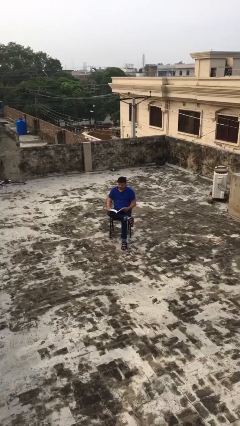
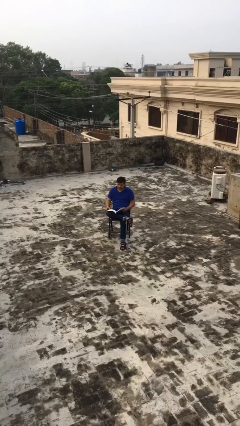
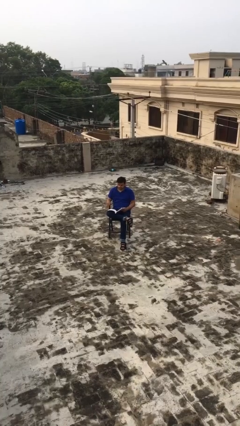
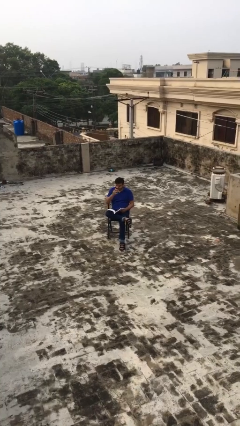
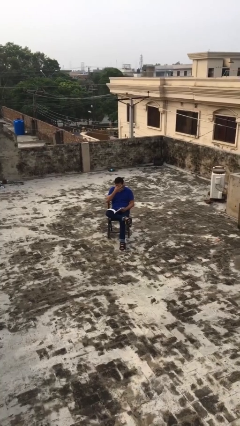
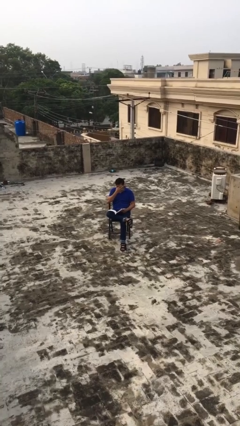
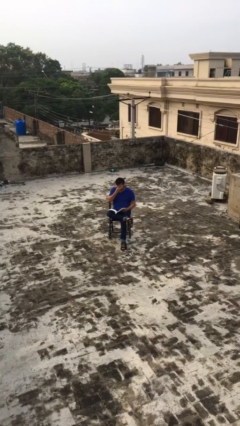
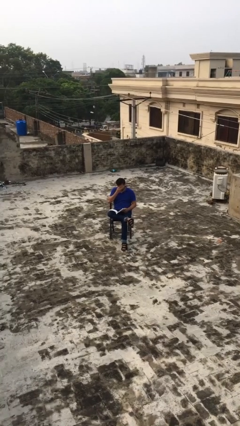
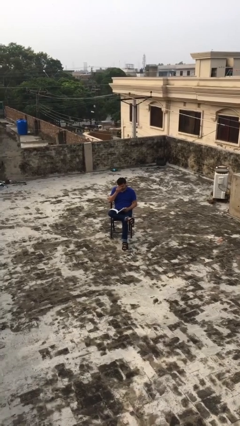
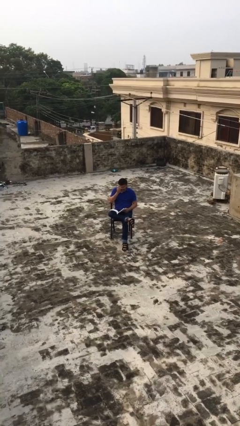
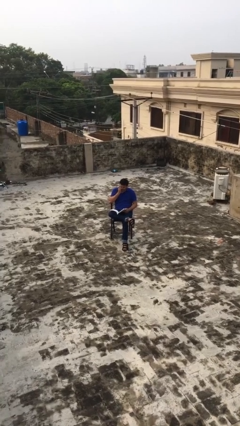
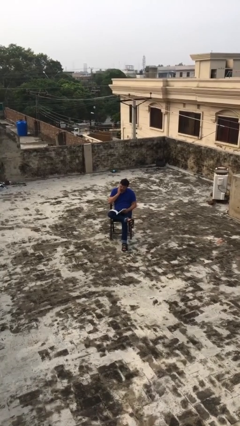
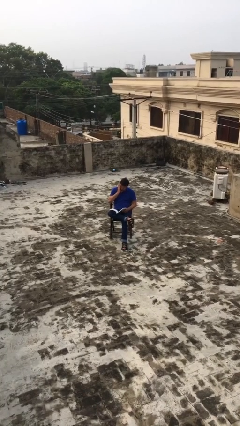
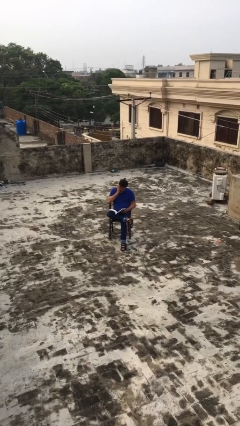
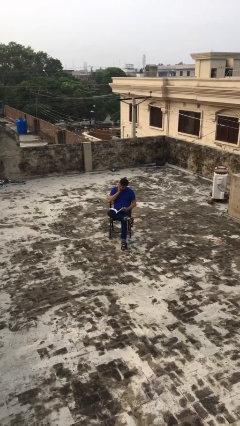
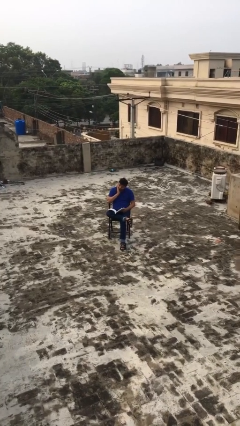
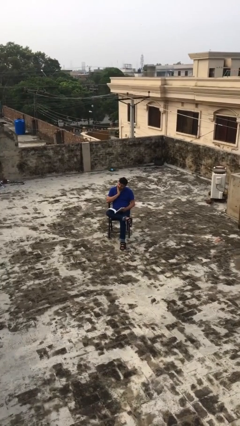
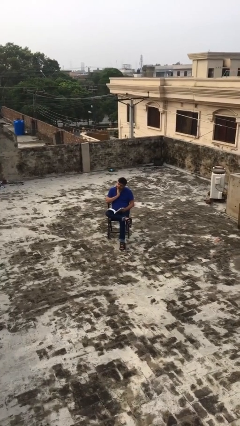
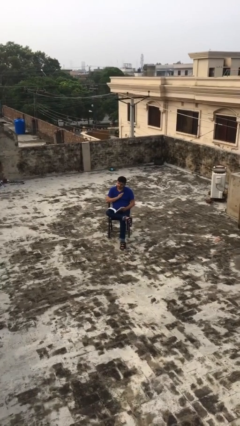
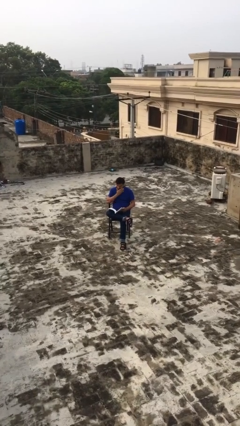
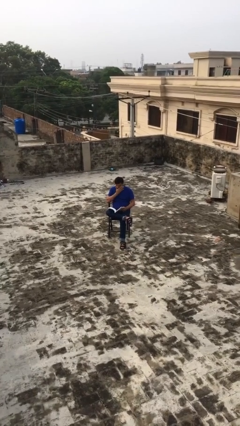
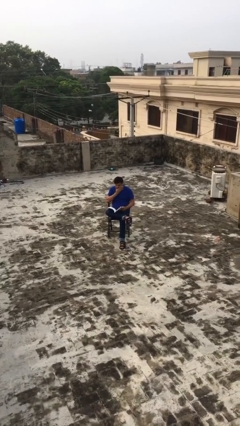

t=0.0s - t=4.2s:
person reads document

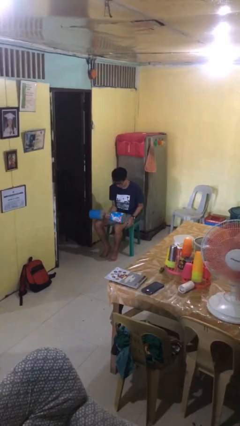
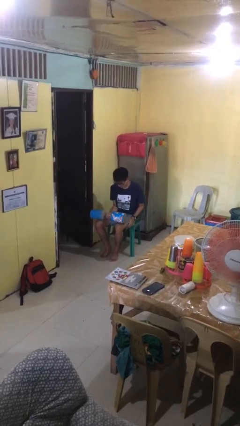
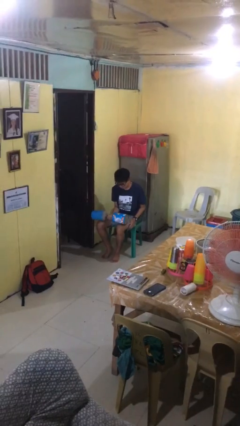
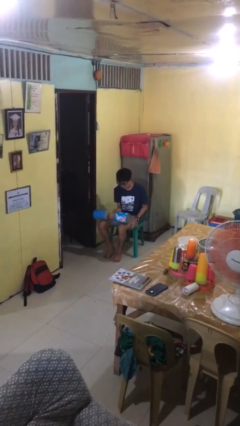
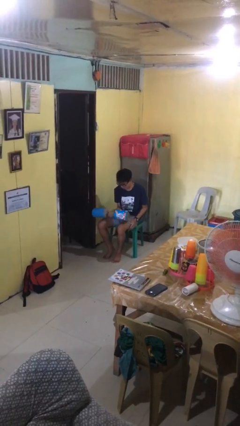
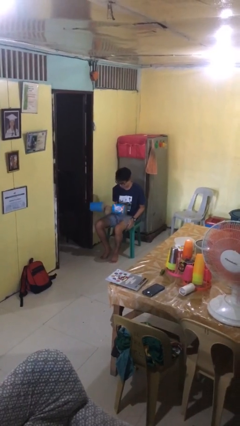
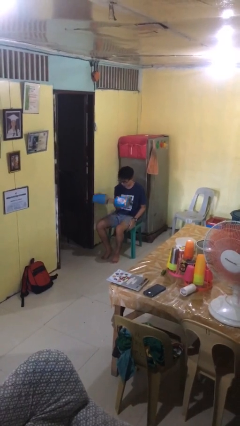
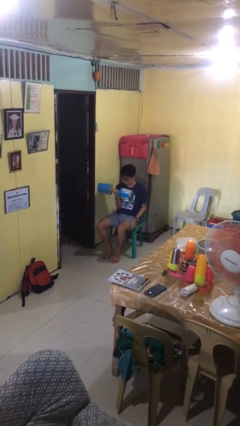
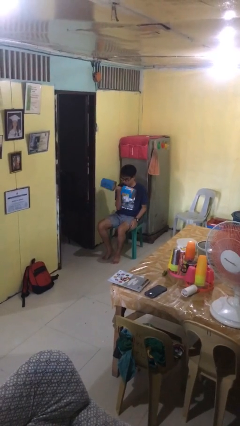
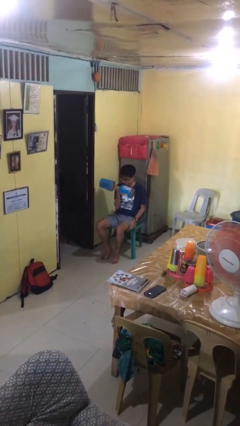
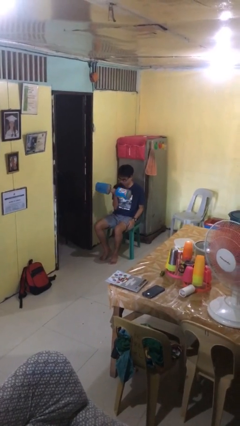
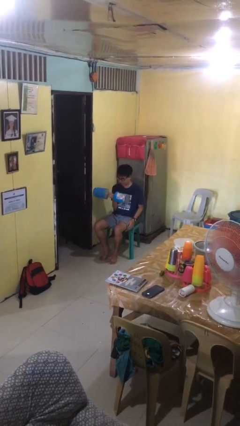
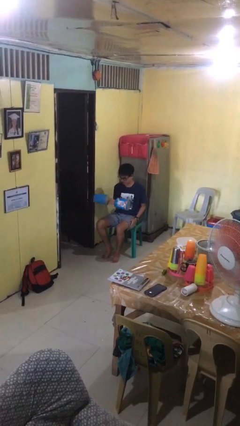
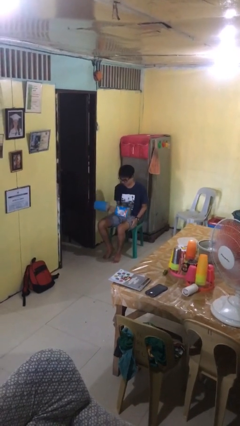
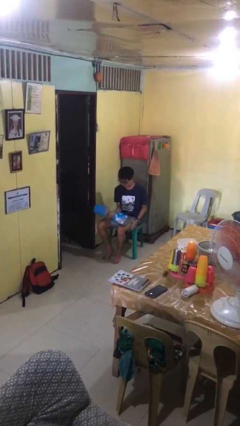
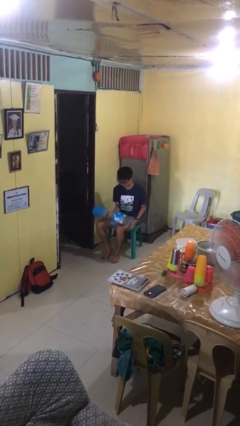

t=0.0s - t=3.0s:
person lifts dumbbells

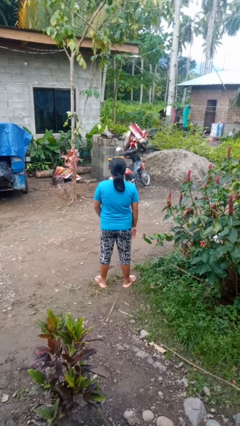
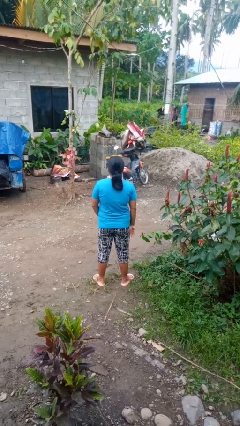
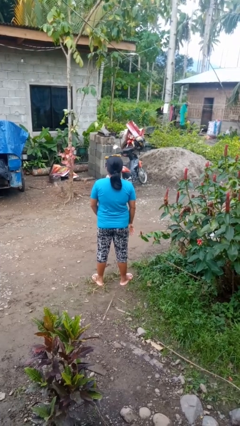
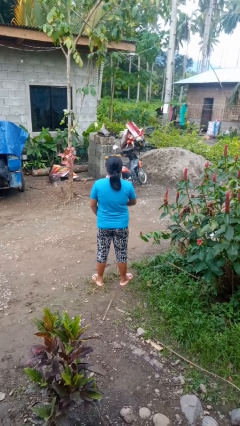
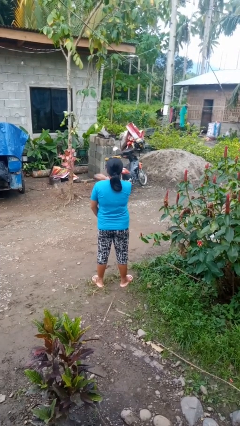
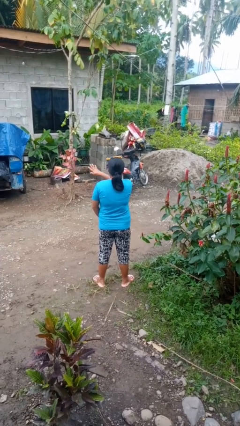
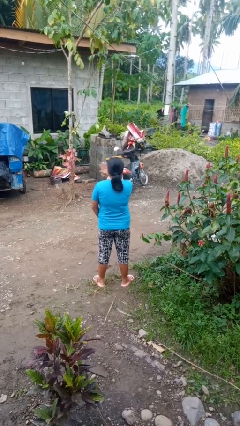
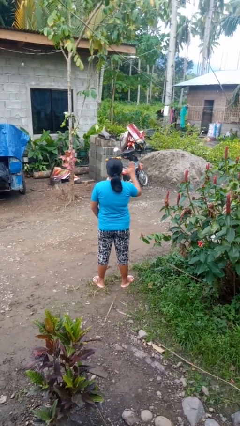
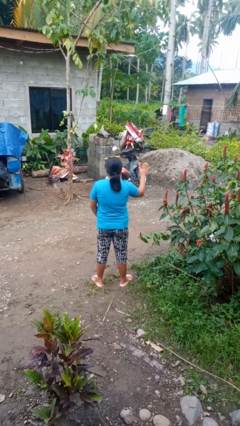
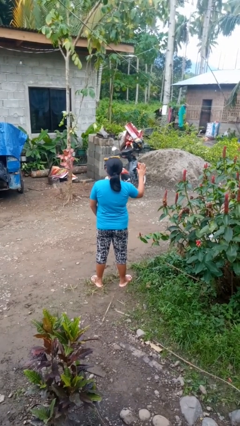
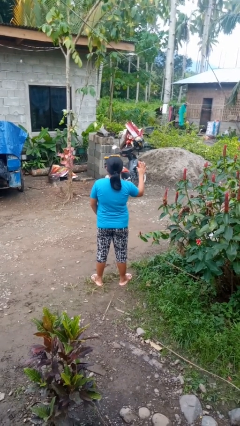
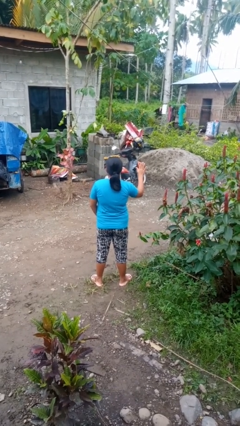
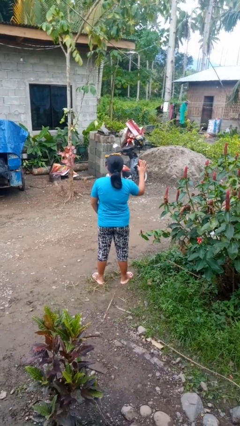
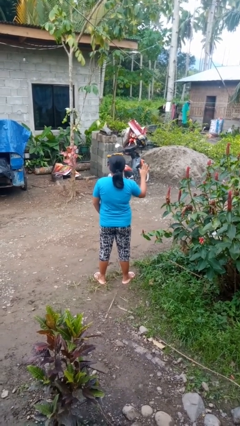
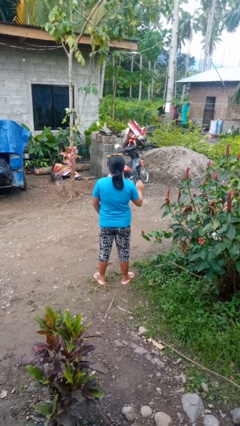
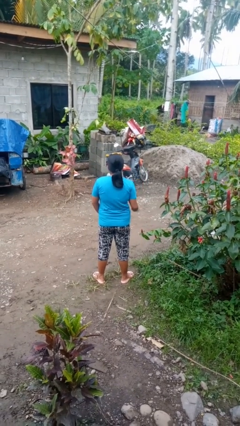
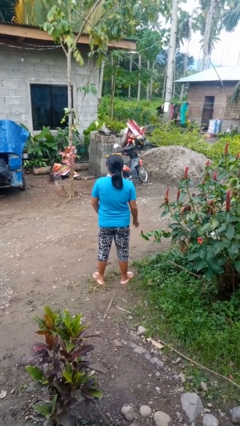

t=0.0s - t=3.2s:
person gestures swipe right

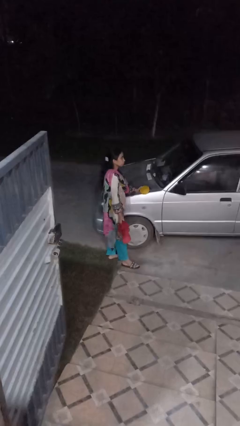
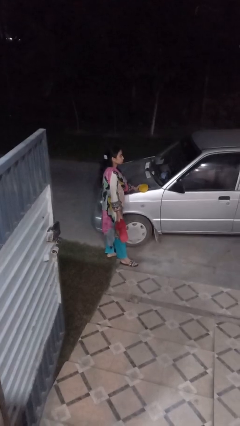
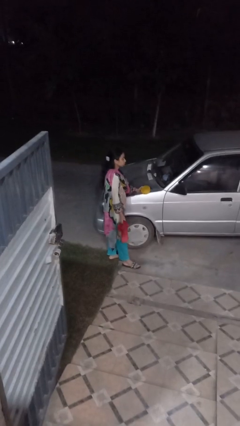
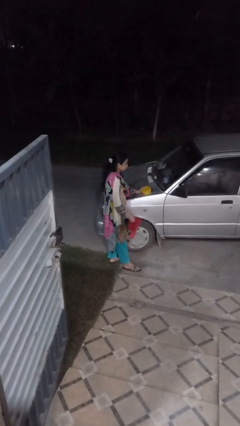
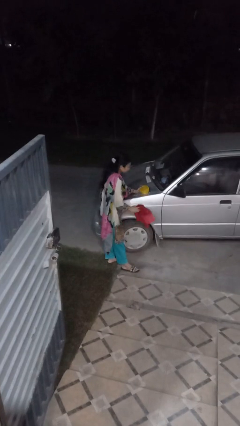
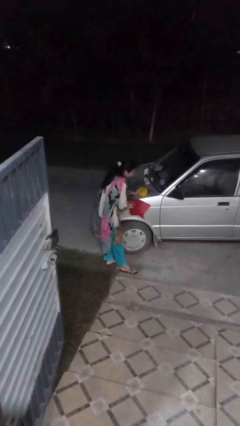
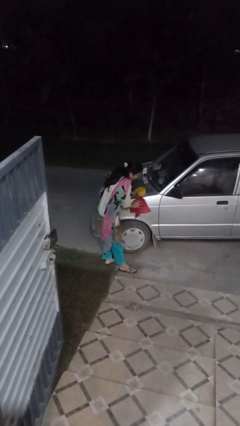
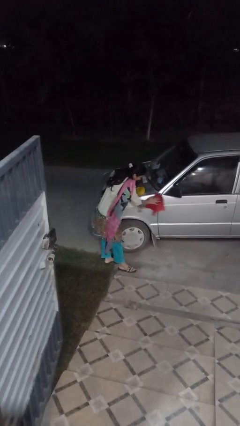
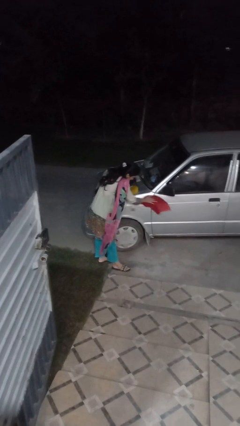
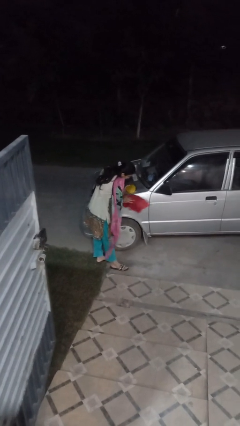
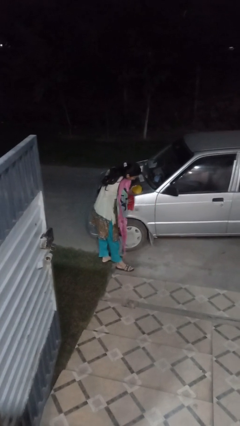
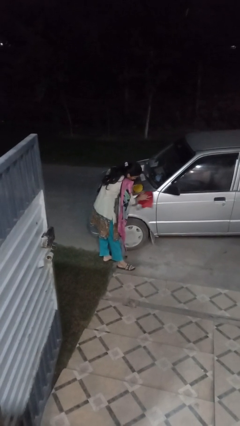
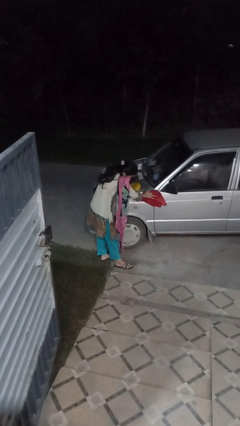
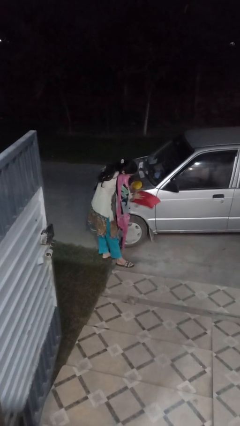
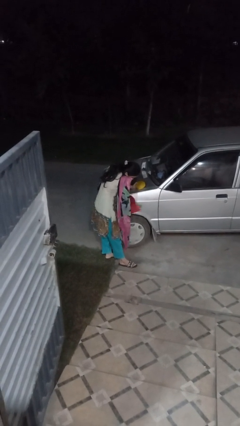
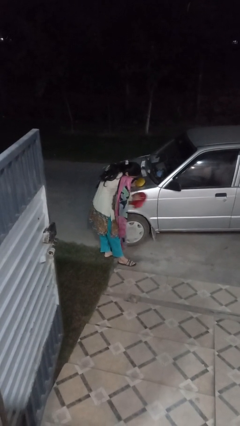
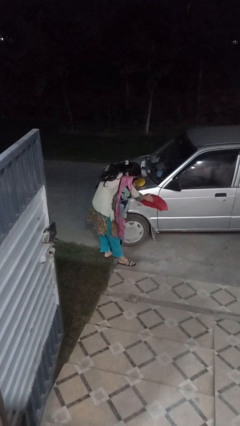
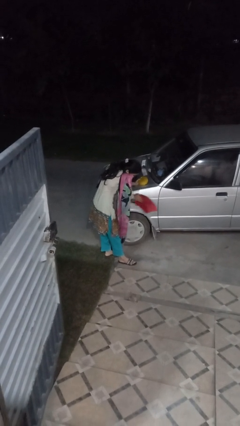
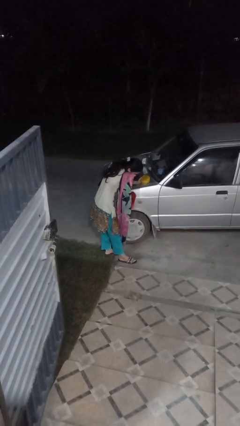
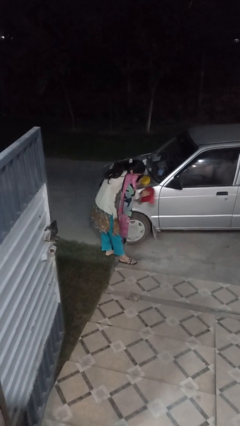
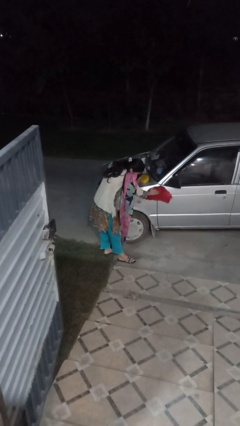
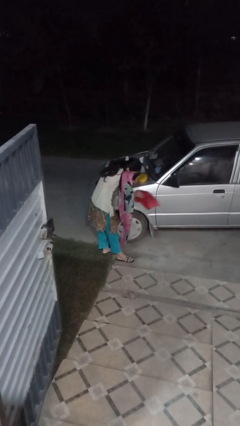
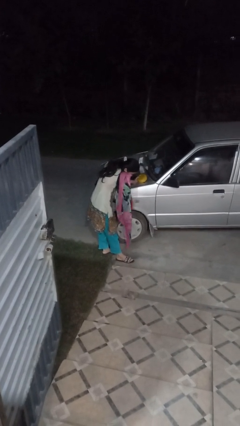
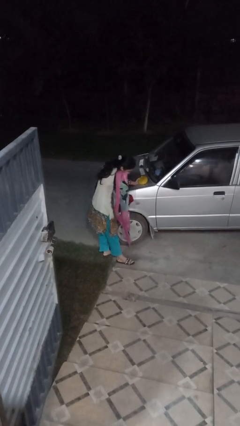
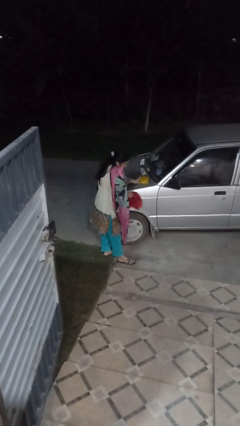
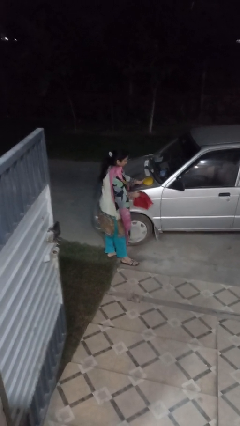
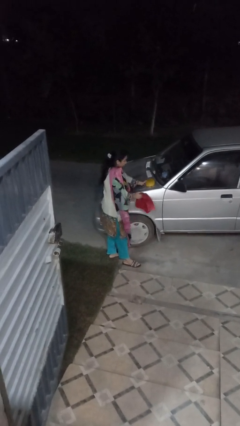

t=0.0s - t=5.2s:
person polishes car with rag

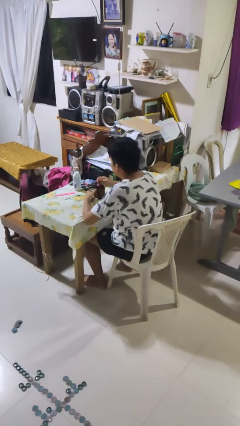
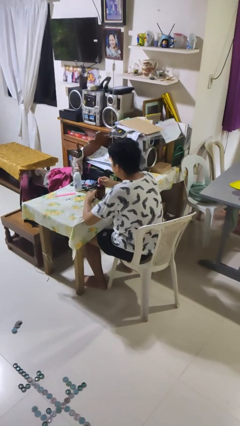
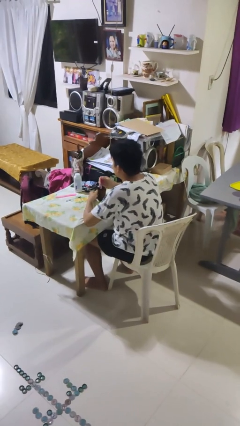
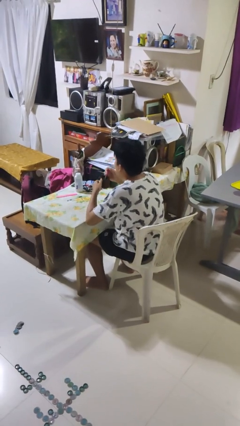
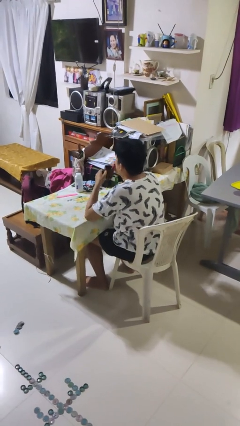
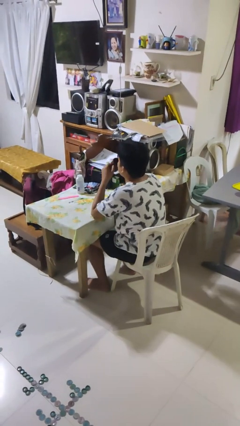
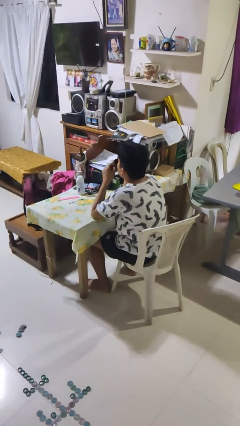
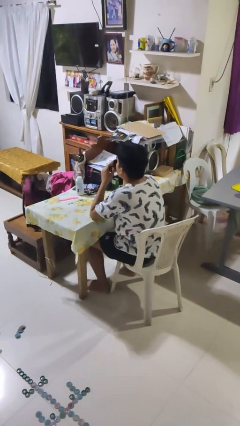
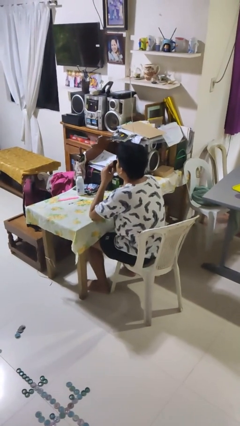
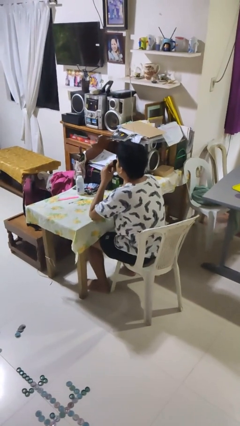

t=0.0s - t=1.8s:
person drinks from mug
